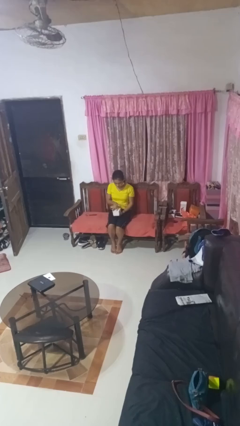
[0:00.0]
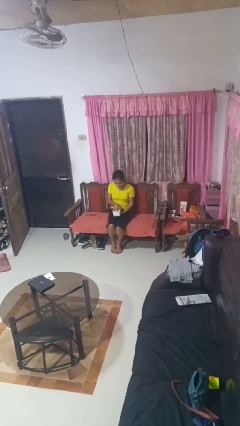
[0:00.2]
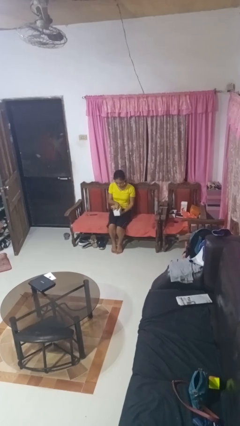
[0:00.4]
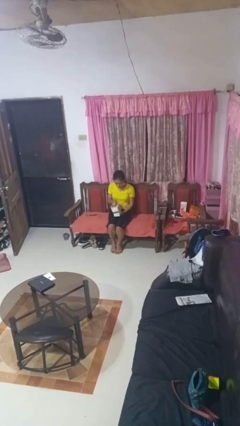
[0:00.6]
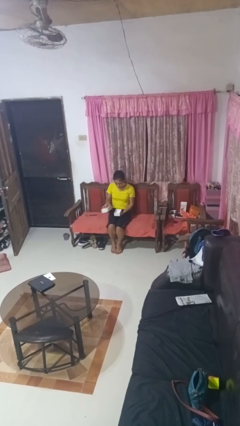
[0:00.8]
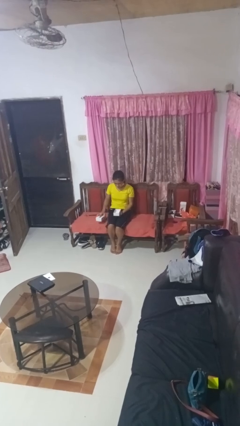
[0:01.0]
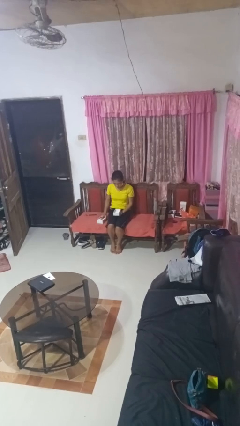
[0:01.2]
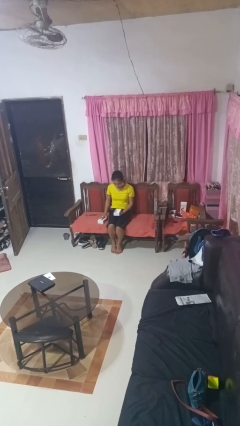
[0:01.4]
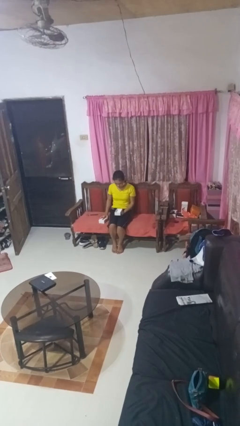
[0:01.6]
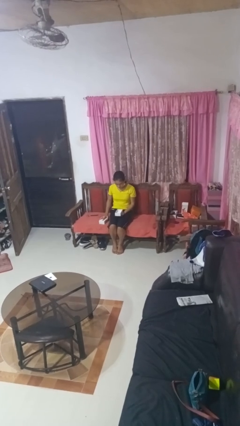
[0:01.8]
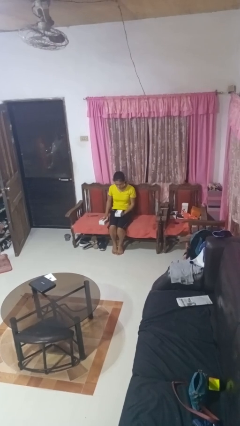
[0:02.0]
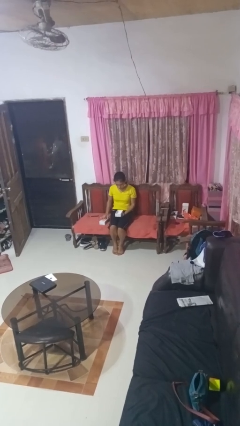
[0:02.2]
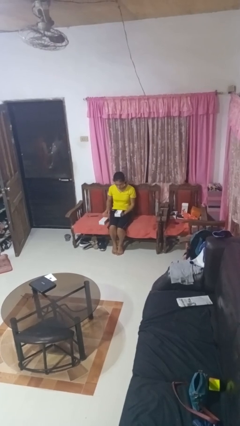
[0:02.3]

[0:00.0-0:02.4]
person opens jewelry box

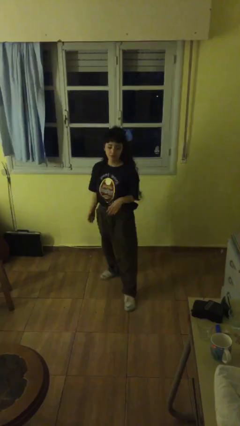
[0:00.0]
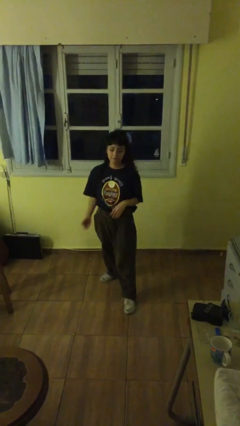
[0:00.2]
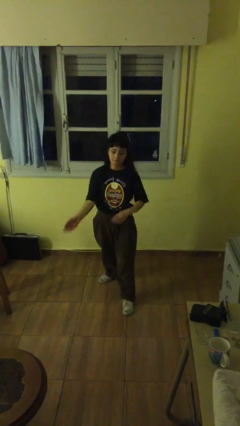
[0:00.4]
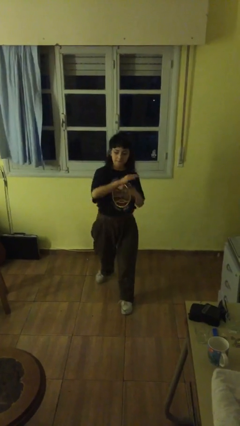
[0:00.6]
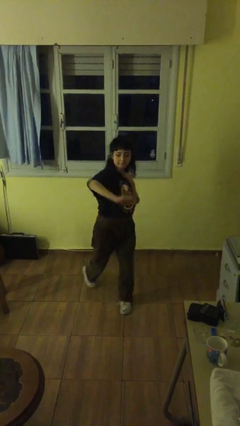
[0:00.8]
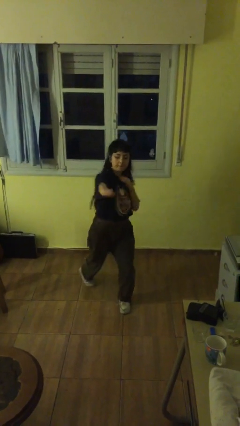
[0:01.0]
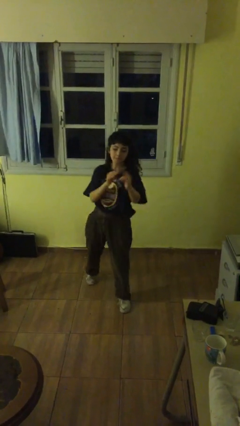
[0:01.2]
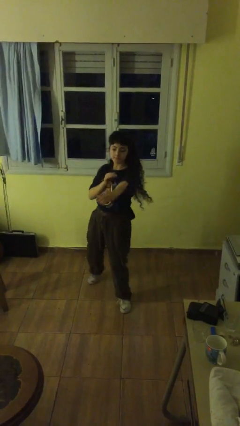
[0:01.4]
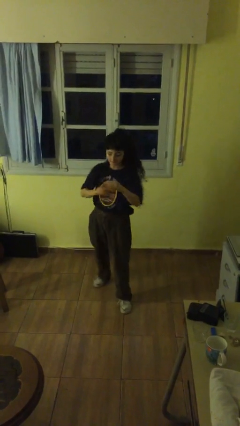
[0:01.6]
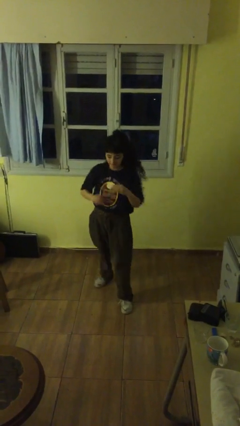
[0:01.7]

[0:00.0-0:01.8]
person karate chop

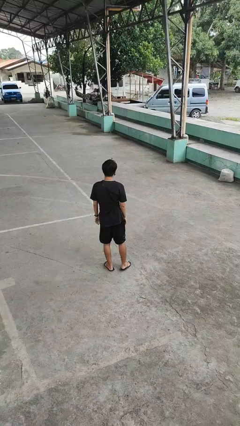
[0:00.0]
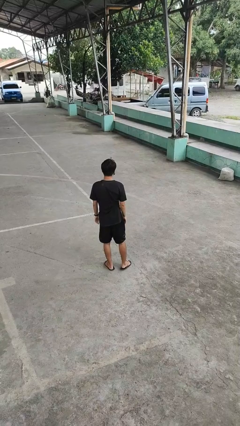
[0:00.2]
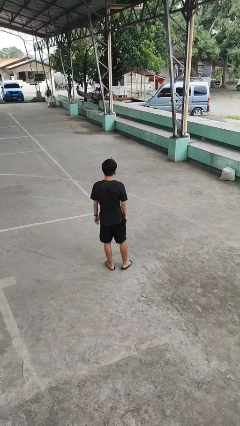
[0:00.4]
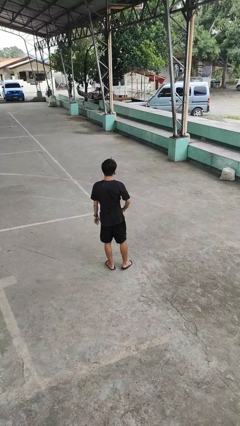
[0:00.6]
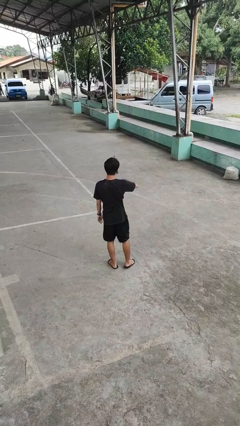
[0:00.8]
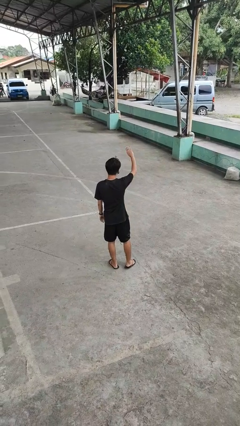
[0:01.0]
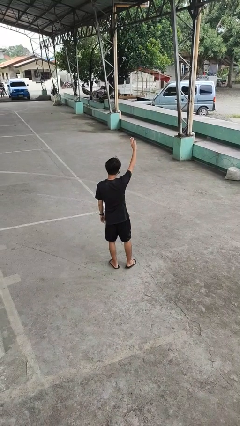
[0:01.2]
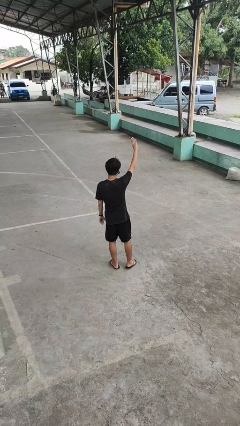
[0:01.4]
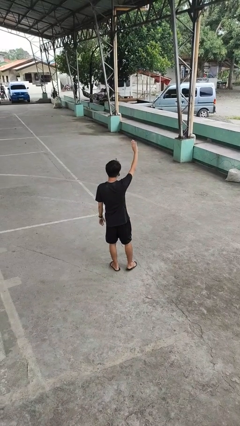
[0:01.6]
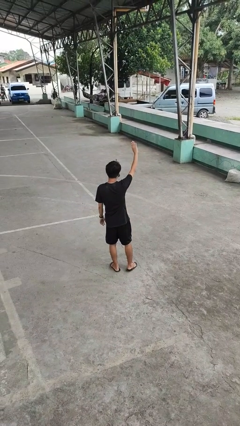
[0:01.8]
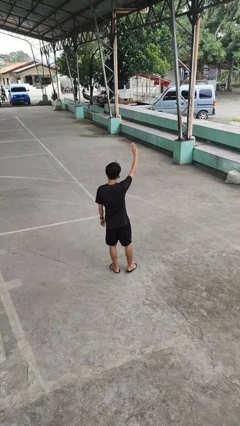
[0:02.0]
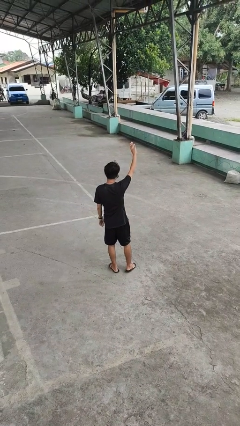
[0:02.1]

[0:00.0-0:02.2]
person gestures swipe up

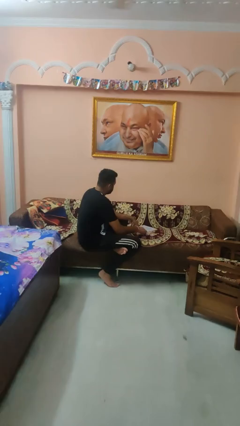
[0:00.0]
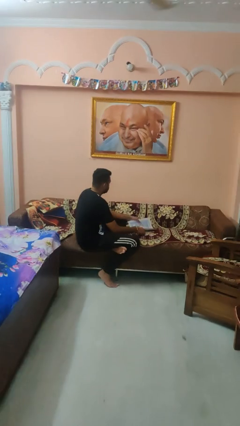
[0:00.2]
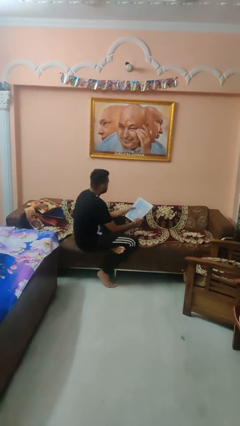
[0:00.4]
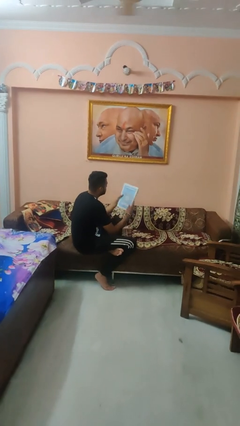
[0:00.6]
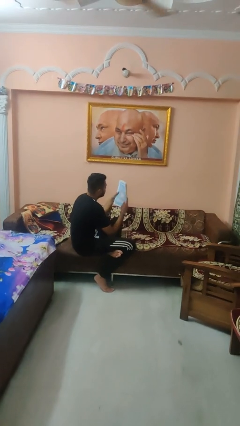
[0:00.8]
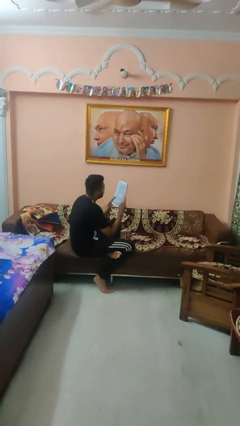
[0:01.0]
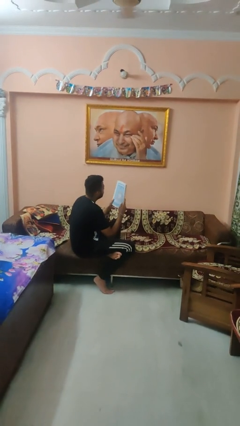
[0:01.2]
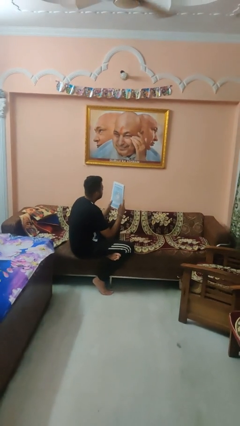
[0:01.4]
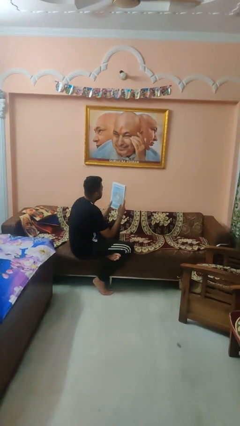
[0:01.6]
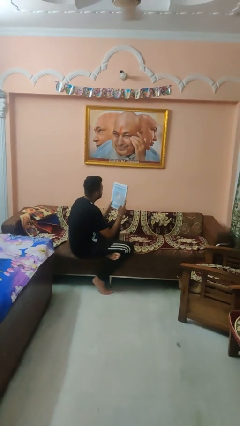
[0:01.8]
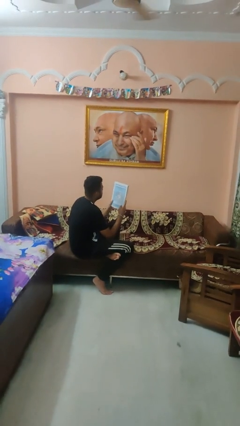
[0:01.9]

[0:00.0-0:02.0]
person picks up object from couch

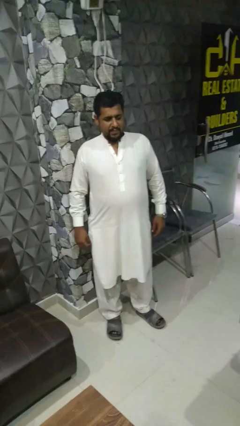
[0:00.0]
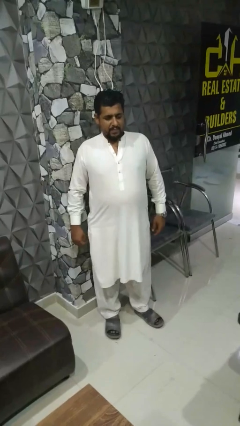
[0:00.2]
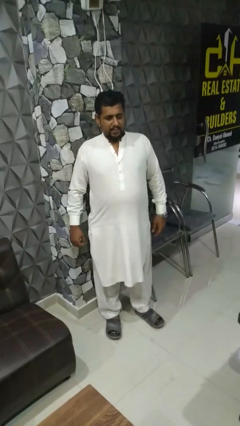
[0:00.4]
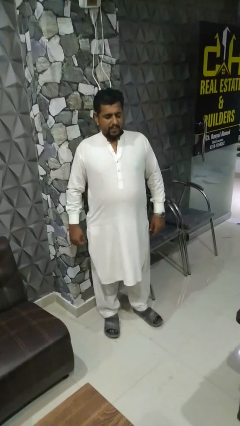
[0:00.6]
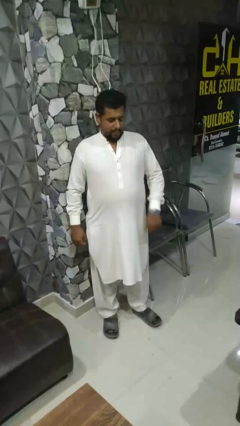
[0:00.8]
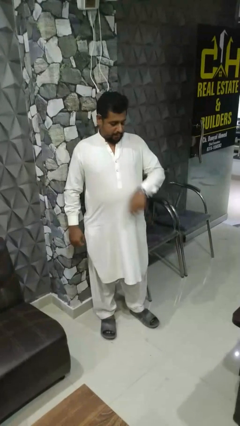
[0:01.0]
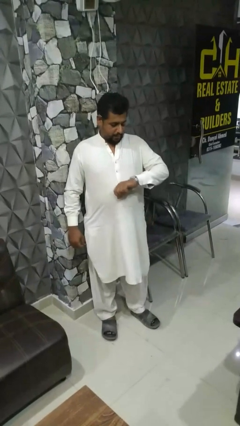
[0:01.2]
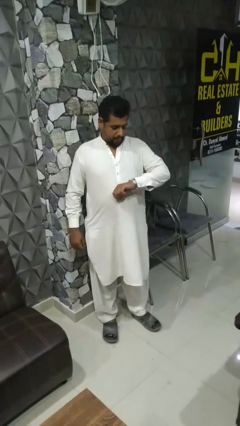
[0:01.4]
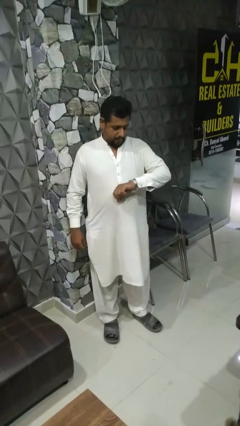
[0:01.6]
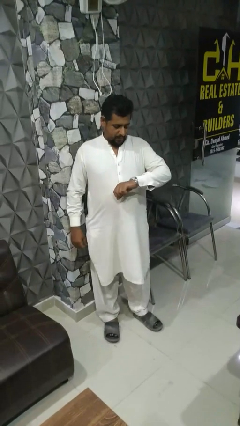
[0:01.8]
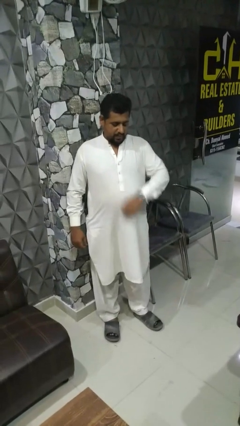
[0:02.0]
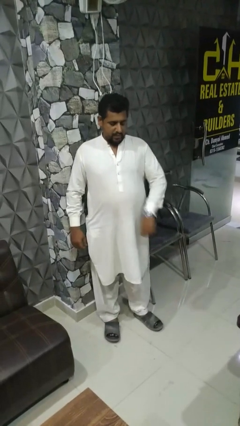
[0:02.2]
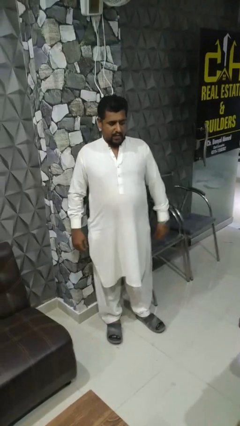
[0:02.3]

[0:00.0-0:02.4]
person looks at wristwatch

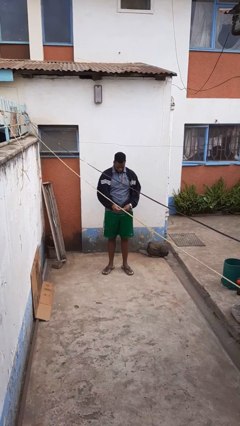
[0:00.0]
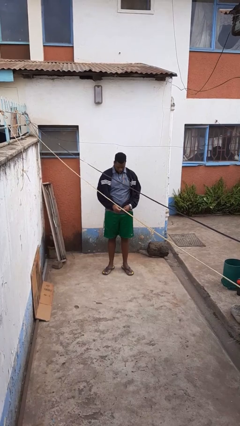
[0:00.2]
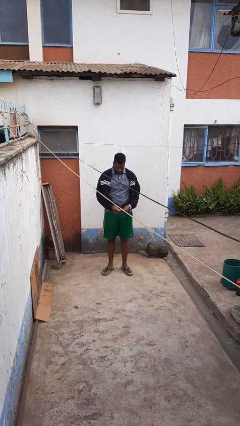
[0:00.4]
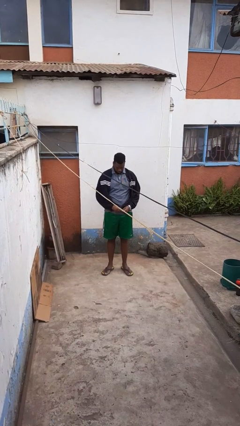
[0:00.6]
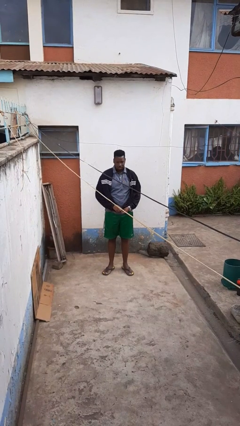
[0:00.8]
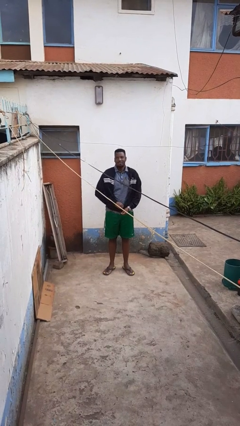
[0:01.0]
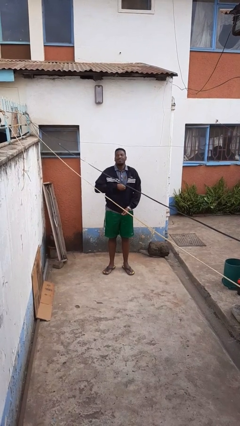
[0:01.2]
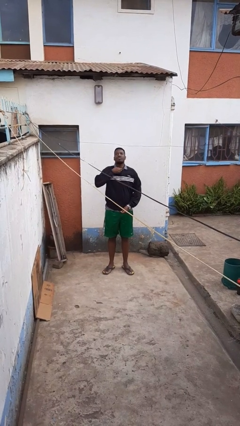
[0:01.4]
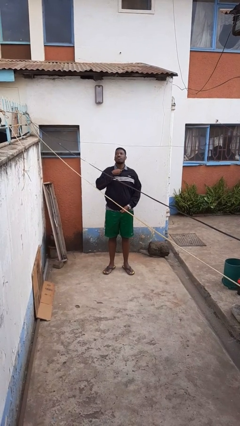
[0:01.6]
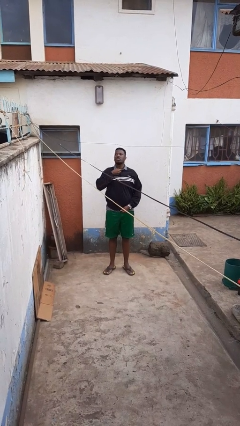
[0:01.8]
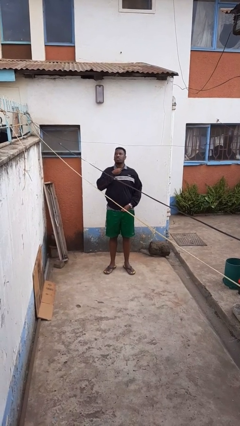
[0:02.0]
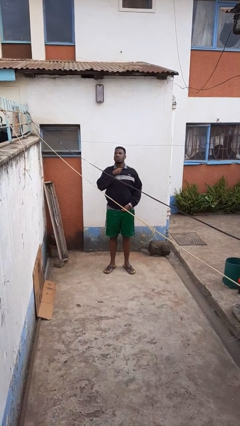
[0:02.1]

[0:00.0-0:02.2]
person zips up jacket

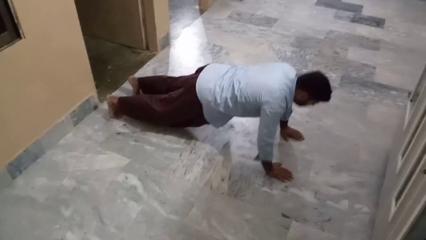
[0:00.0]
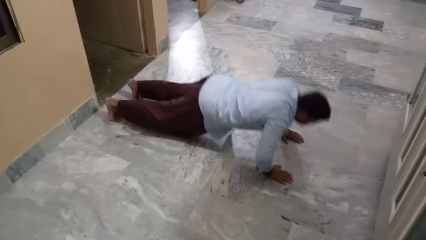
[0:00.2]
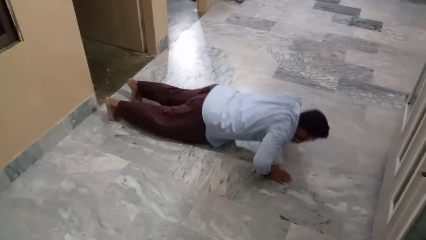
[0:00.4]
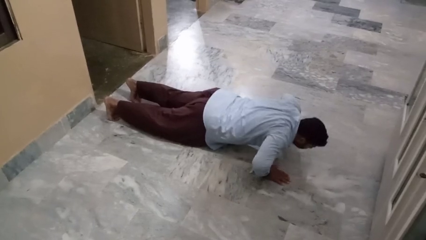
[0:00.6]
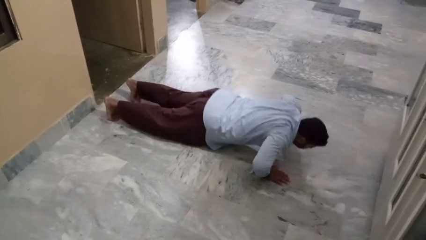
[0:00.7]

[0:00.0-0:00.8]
person exercises with pushup

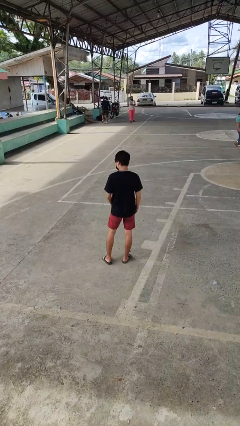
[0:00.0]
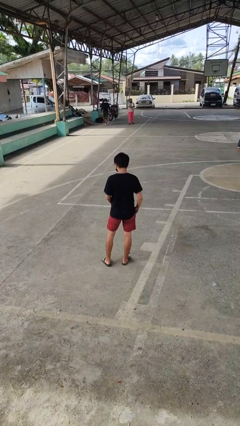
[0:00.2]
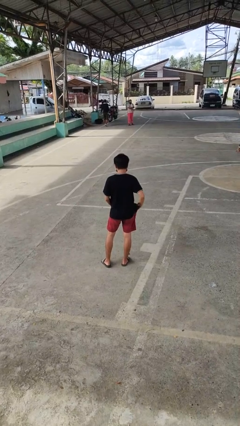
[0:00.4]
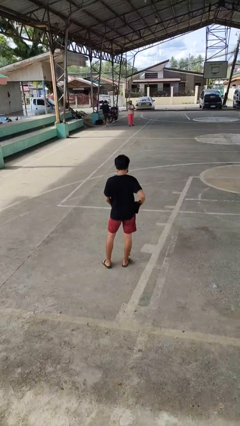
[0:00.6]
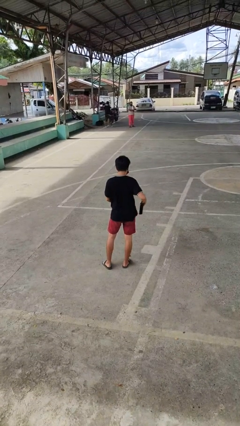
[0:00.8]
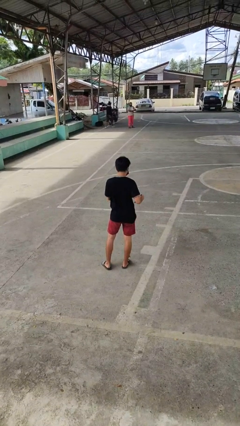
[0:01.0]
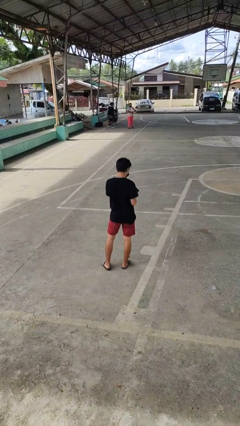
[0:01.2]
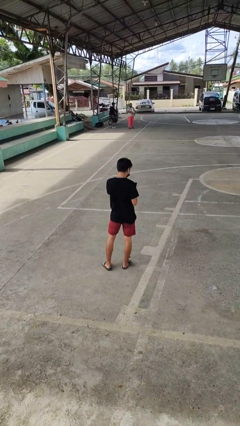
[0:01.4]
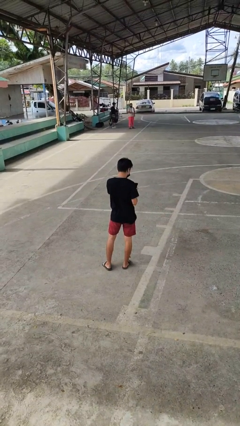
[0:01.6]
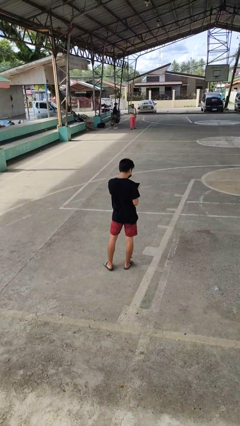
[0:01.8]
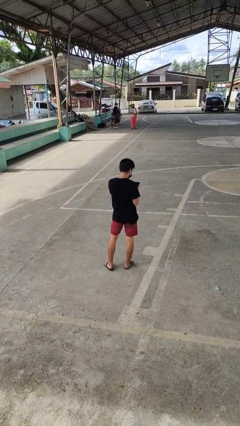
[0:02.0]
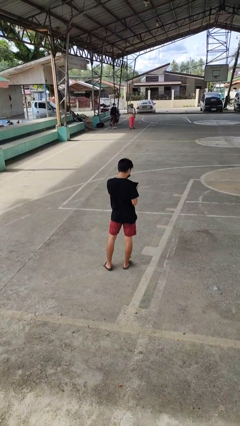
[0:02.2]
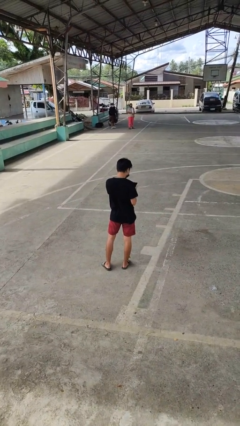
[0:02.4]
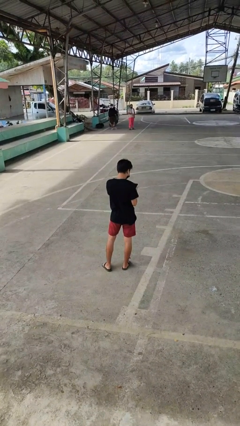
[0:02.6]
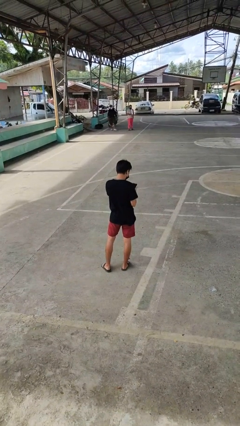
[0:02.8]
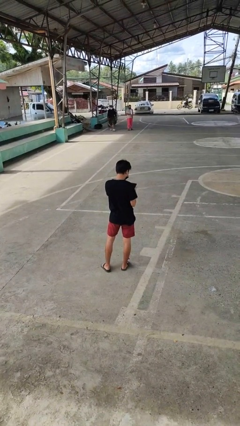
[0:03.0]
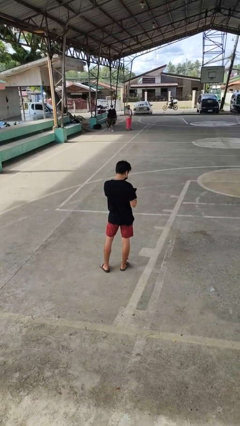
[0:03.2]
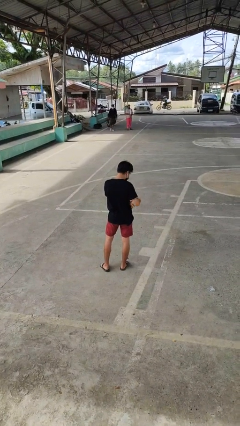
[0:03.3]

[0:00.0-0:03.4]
person takes phone from pocket
